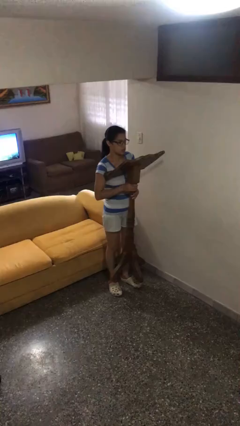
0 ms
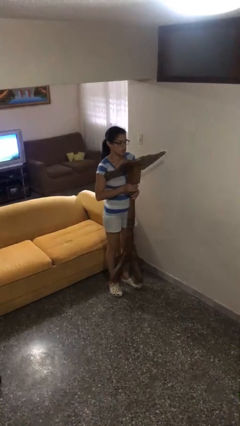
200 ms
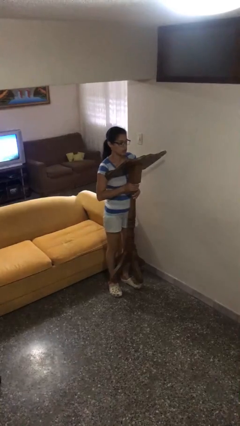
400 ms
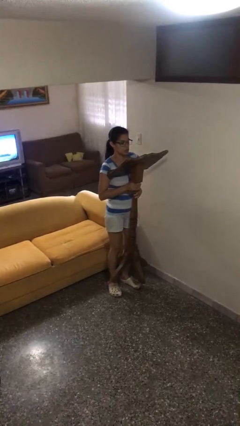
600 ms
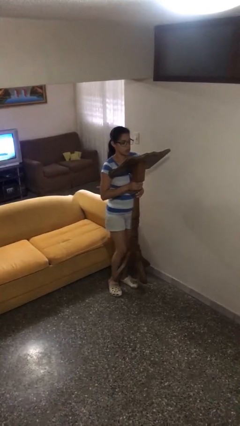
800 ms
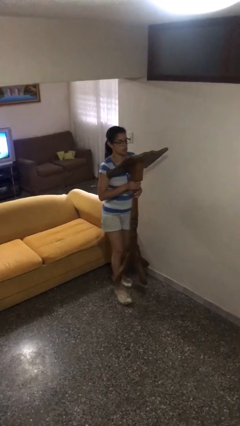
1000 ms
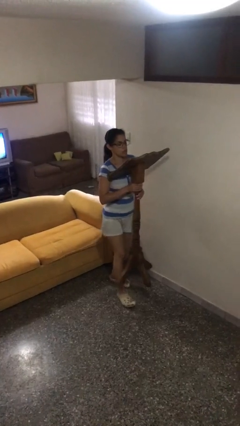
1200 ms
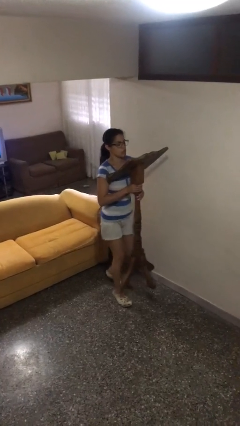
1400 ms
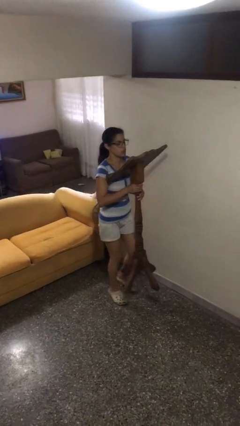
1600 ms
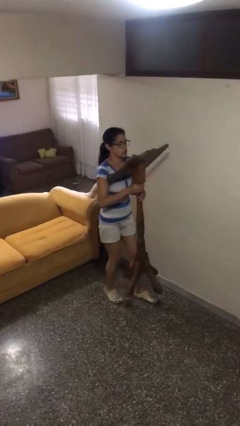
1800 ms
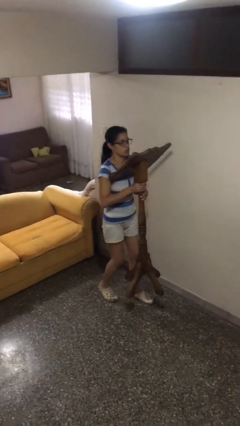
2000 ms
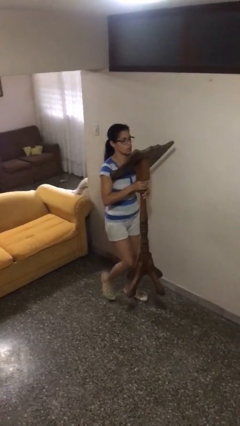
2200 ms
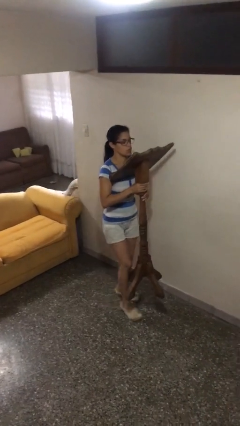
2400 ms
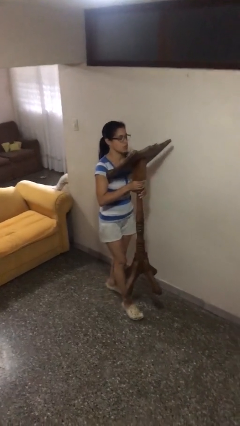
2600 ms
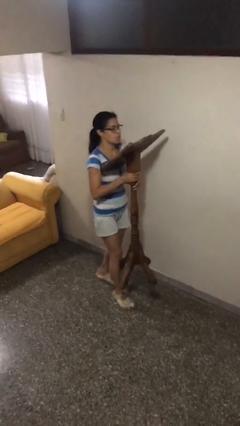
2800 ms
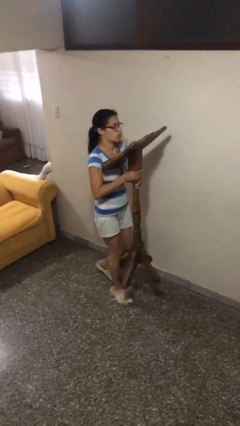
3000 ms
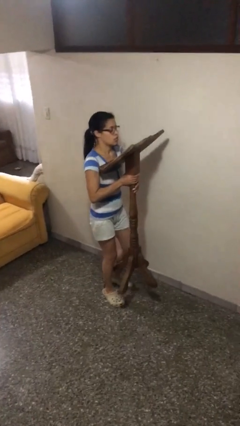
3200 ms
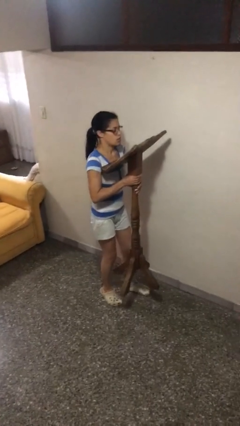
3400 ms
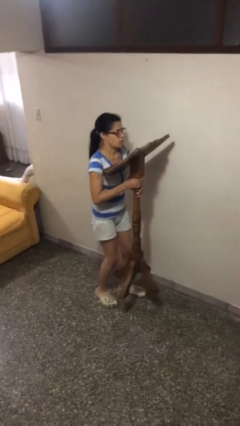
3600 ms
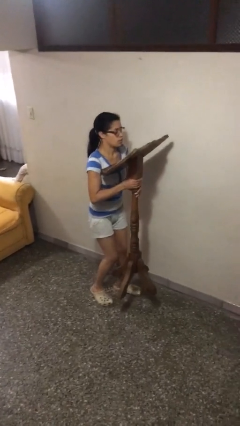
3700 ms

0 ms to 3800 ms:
person carries heavy object

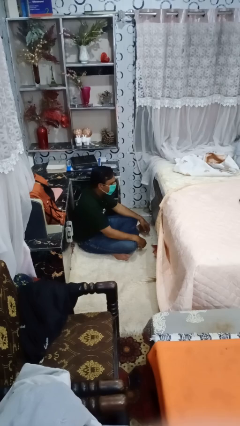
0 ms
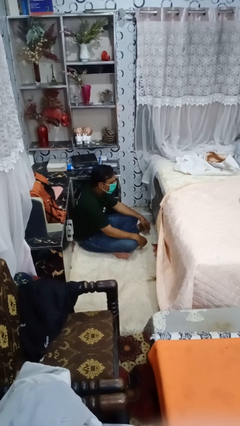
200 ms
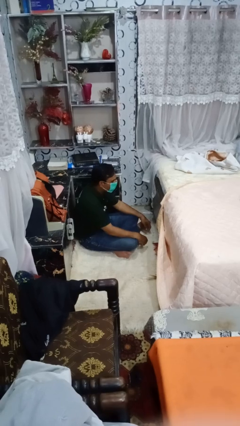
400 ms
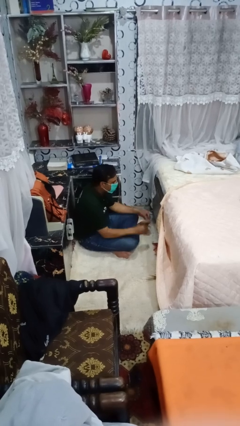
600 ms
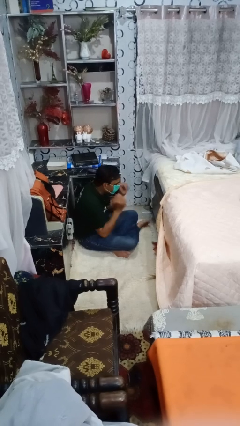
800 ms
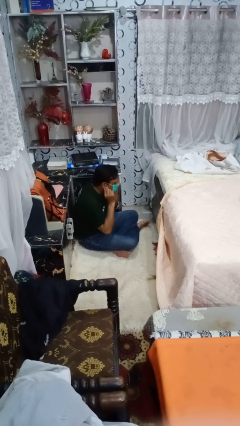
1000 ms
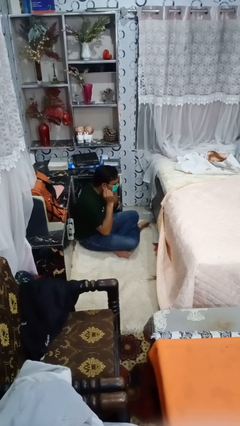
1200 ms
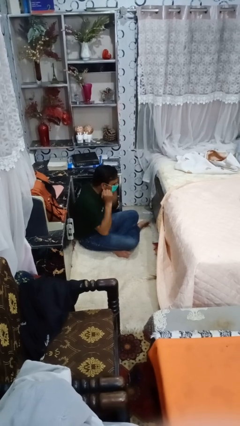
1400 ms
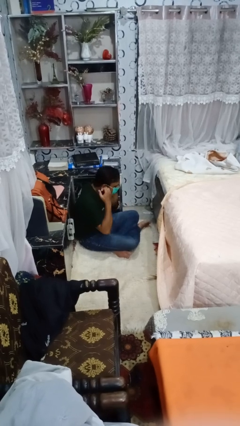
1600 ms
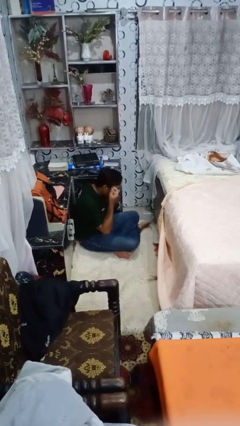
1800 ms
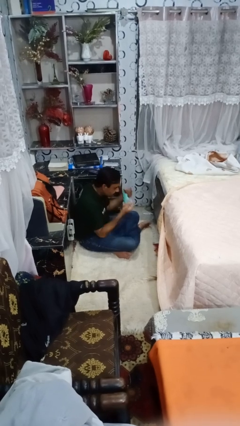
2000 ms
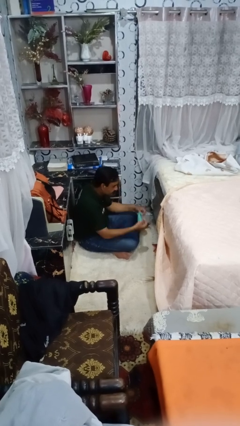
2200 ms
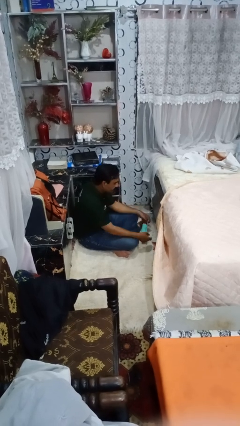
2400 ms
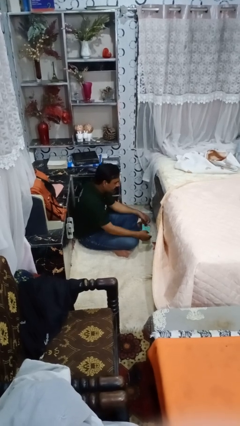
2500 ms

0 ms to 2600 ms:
person takes off facemask

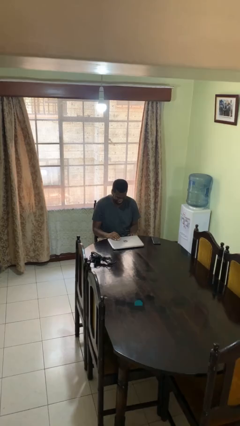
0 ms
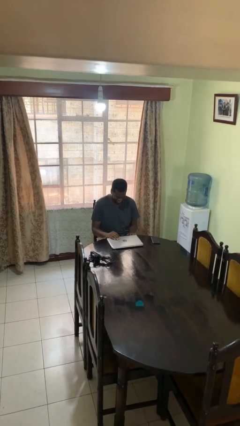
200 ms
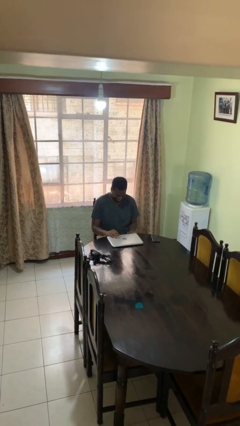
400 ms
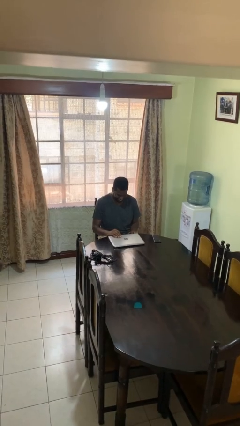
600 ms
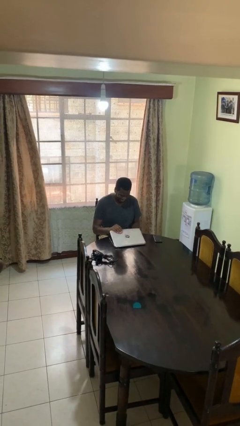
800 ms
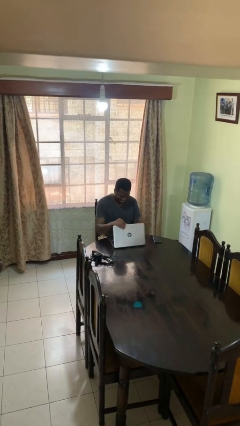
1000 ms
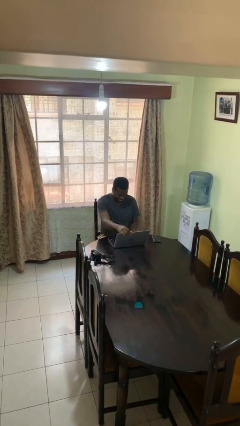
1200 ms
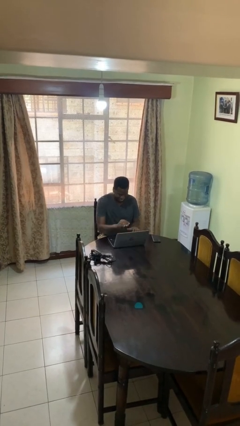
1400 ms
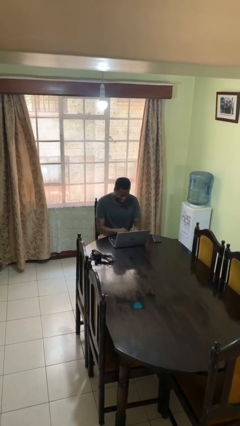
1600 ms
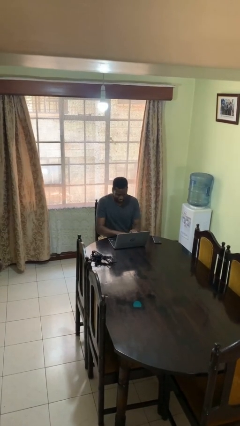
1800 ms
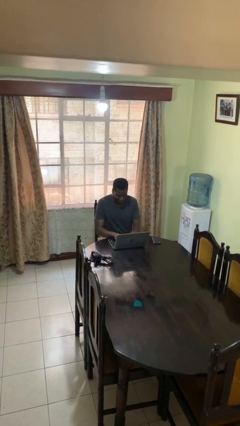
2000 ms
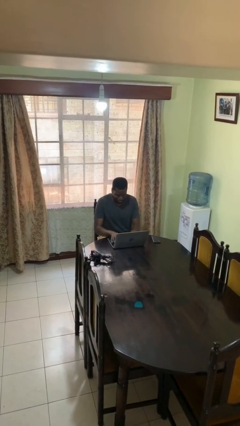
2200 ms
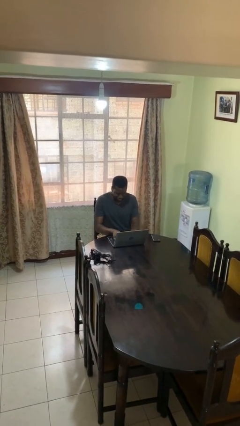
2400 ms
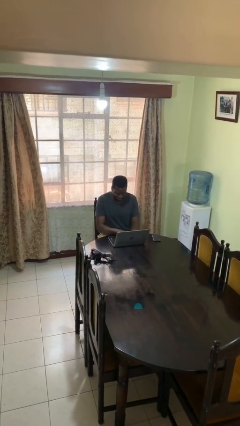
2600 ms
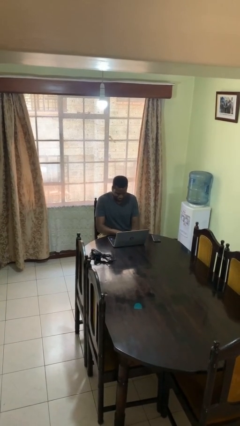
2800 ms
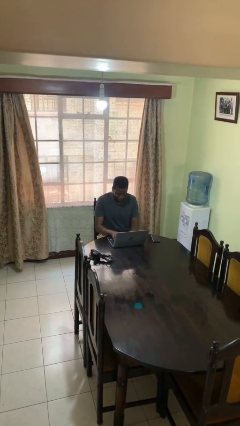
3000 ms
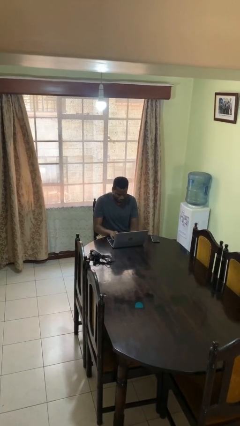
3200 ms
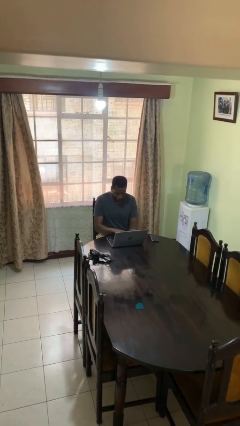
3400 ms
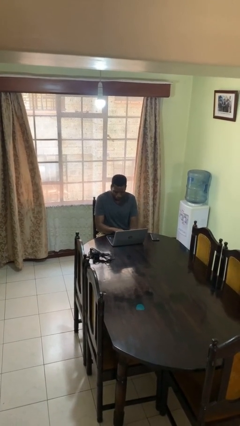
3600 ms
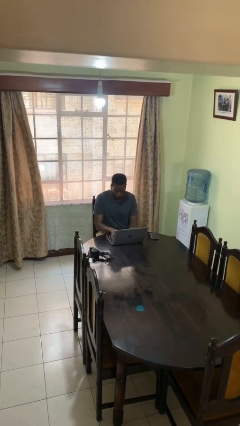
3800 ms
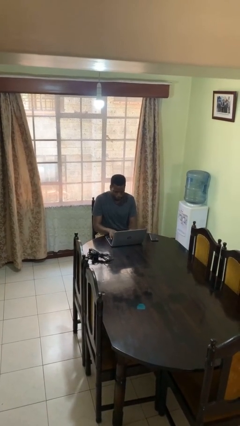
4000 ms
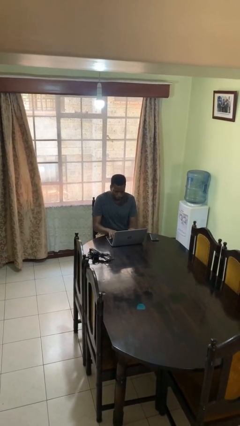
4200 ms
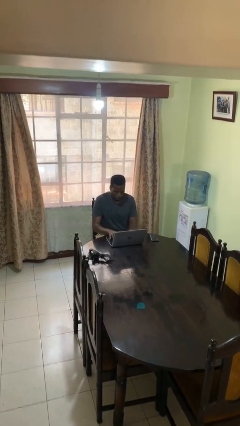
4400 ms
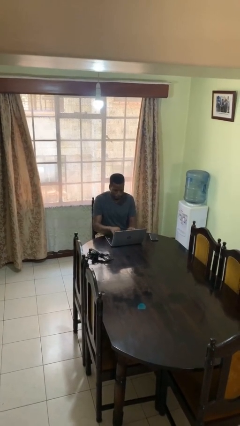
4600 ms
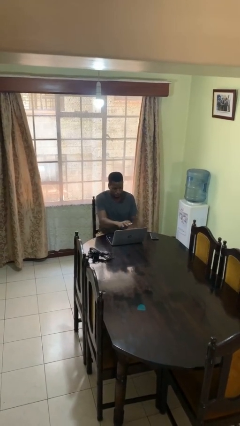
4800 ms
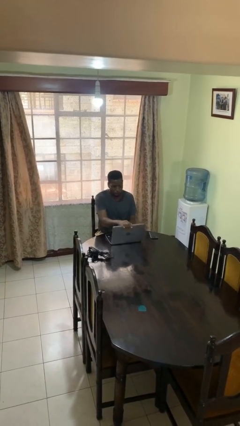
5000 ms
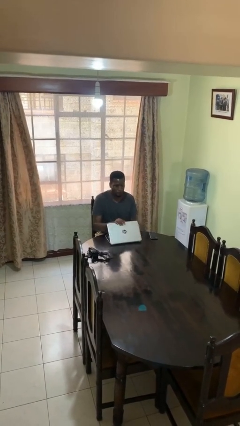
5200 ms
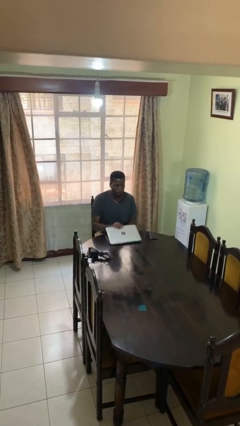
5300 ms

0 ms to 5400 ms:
person interacts with laptop

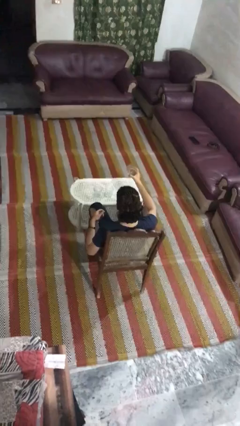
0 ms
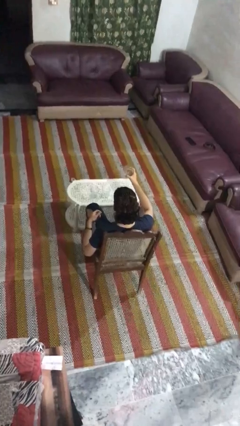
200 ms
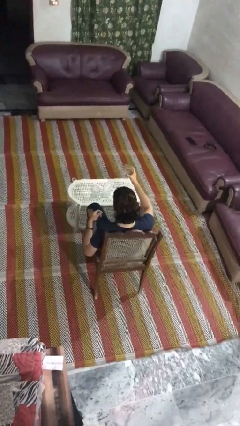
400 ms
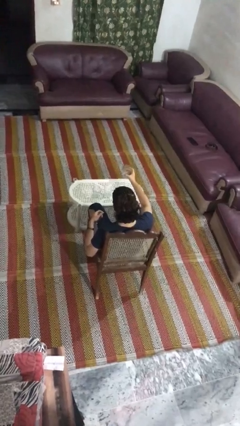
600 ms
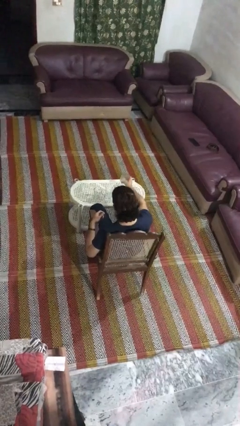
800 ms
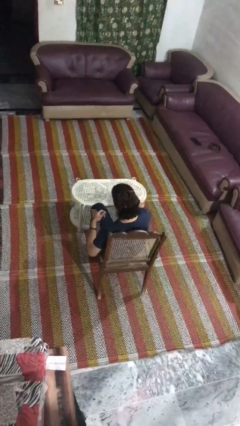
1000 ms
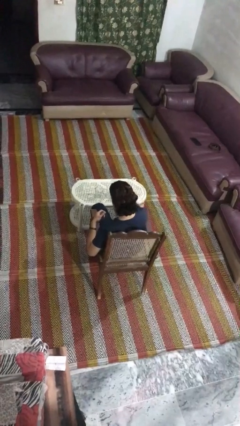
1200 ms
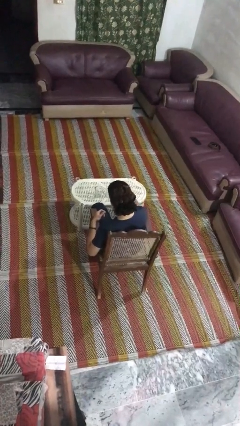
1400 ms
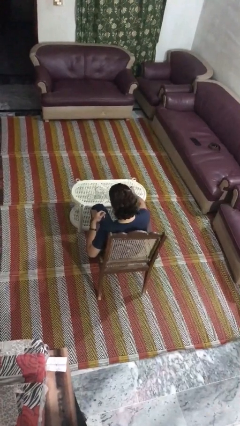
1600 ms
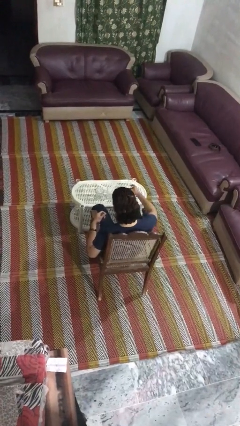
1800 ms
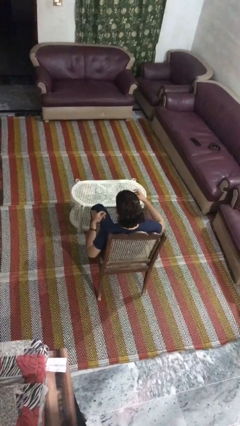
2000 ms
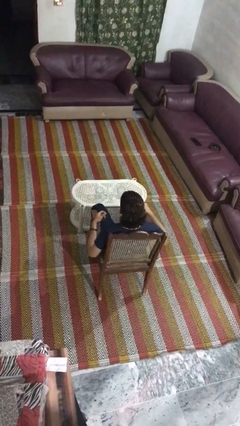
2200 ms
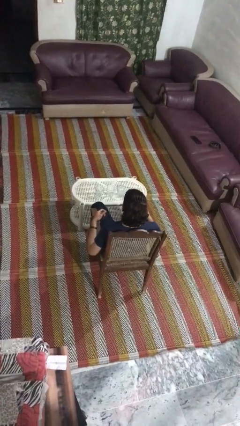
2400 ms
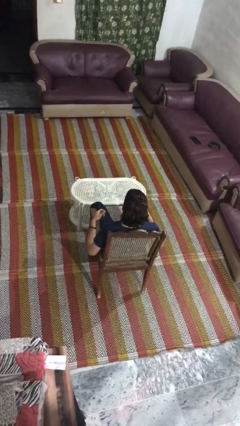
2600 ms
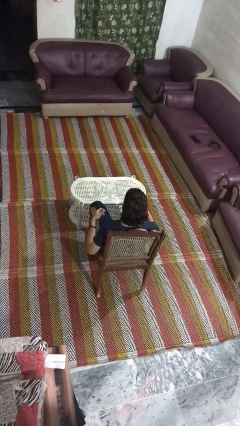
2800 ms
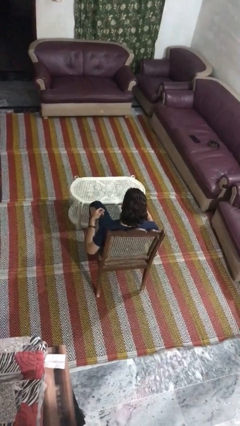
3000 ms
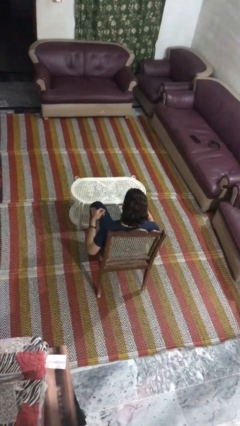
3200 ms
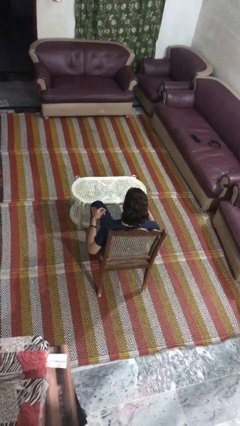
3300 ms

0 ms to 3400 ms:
person puts down object on table

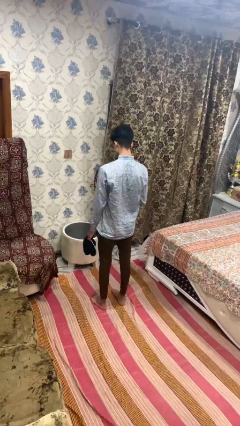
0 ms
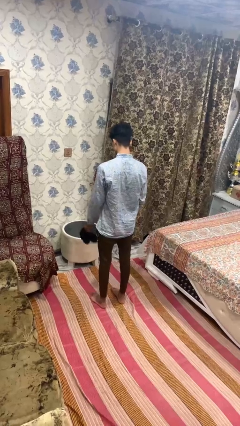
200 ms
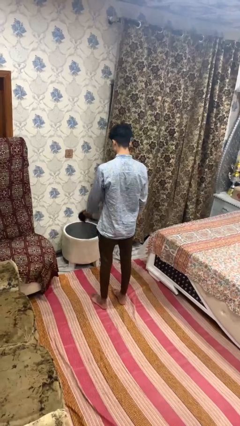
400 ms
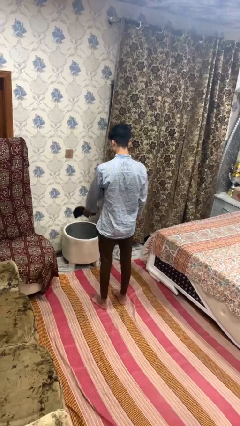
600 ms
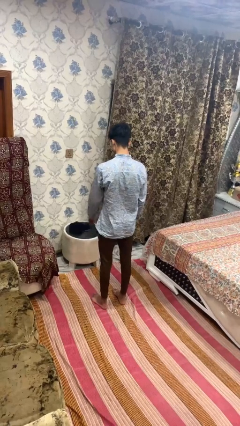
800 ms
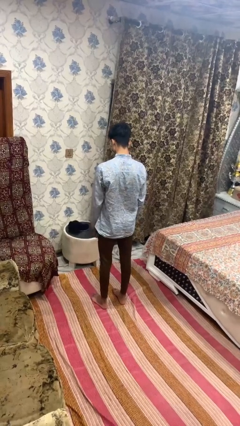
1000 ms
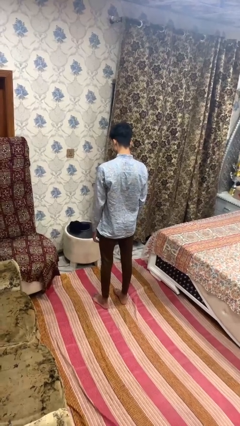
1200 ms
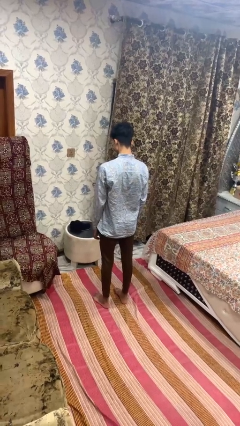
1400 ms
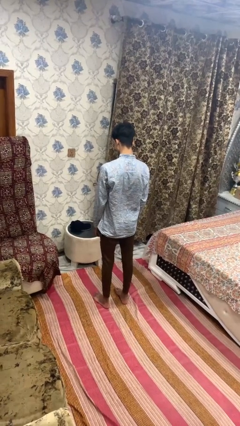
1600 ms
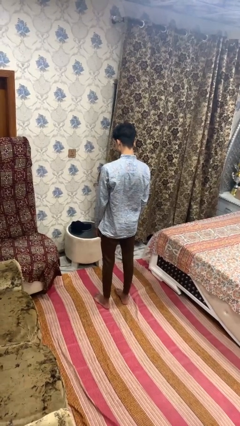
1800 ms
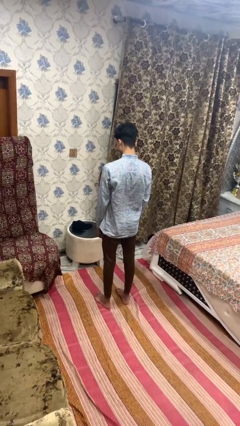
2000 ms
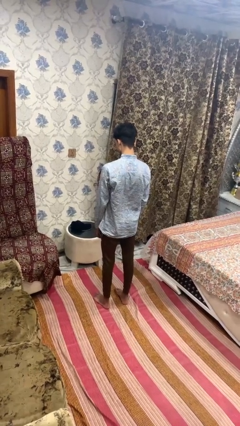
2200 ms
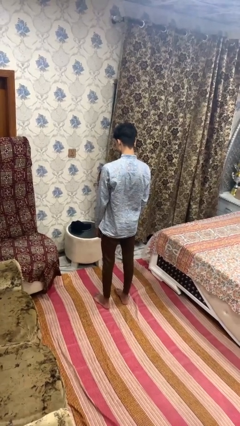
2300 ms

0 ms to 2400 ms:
person throws object on table
